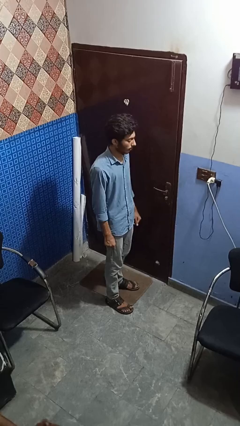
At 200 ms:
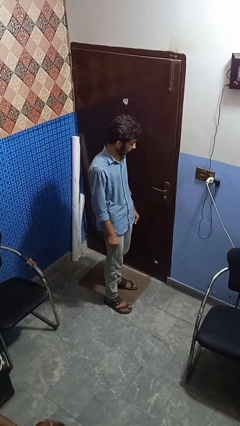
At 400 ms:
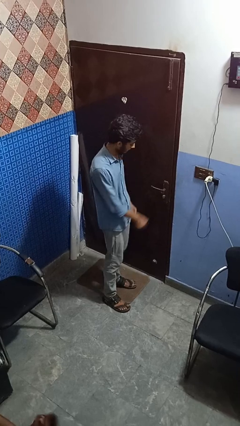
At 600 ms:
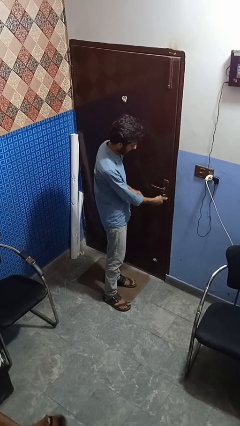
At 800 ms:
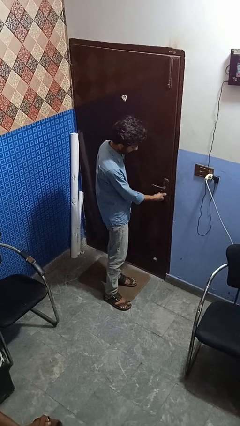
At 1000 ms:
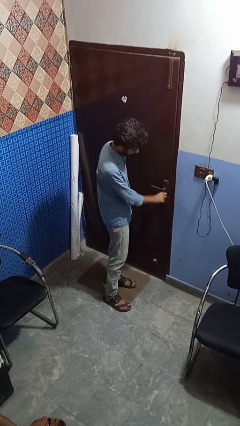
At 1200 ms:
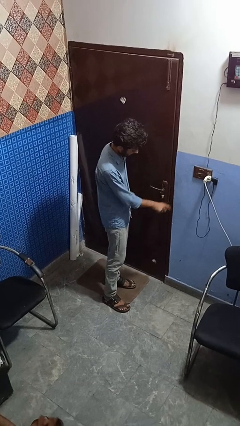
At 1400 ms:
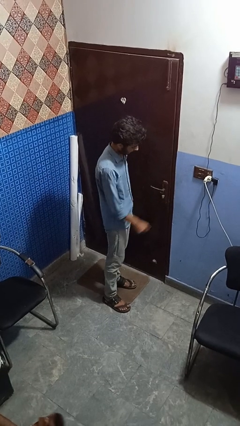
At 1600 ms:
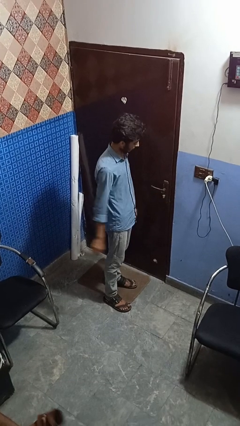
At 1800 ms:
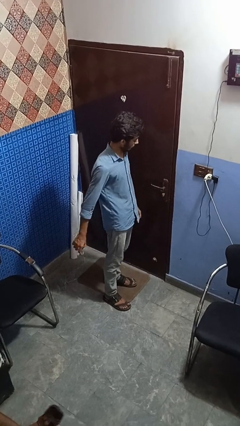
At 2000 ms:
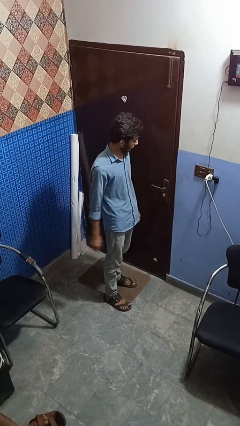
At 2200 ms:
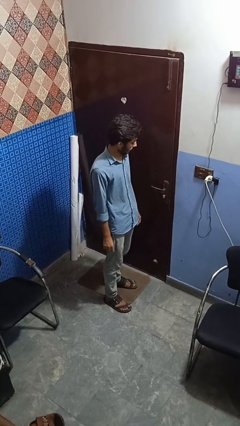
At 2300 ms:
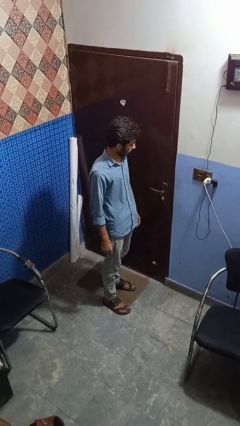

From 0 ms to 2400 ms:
person unlocks door with keys

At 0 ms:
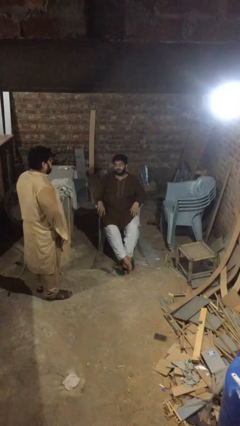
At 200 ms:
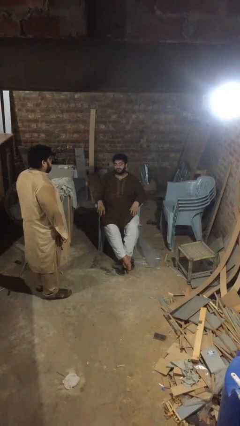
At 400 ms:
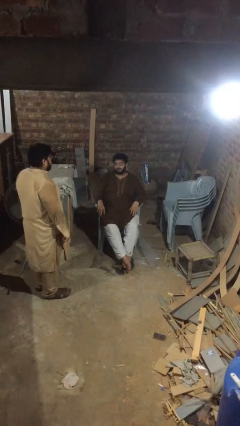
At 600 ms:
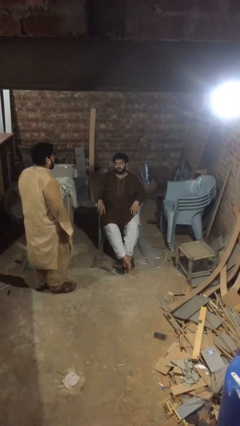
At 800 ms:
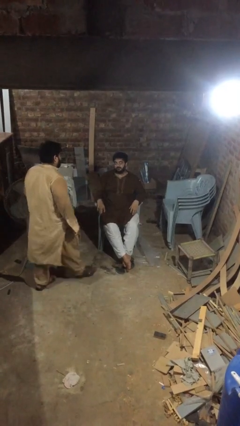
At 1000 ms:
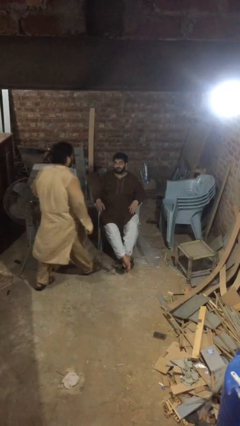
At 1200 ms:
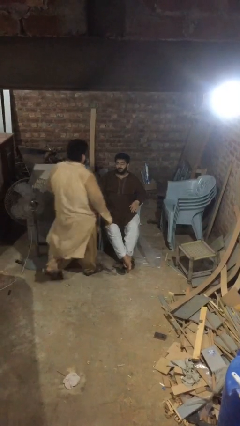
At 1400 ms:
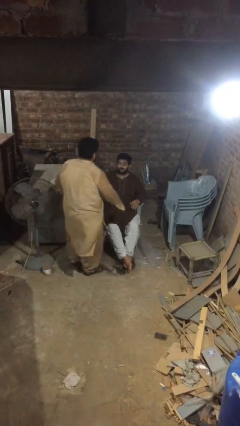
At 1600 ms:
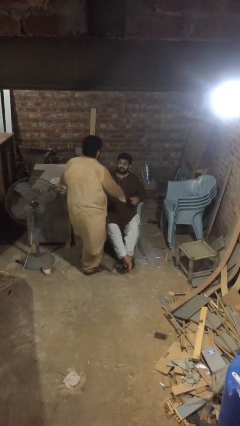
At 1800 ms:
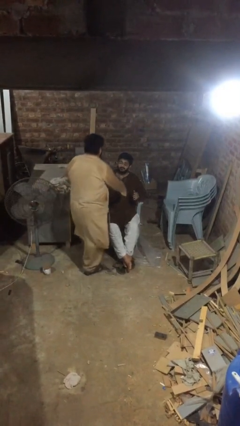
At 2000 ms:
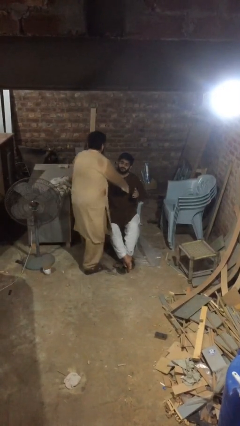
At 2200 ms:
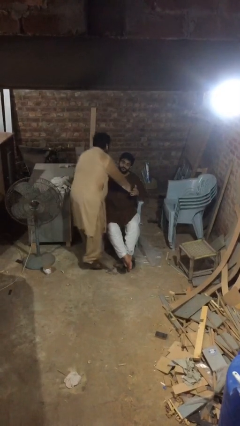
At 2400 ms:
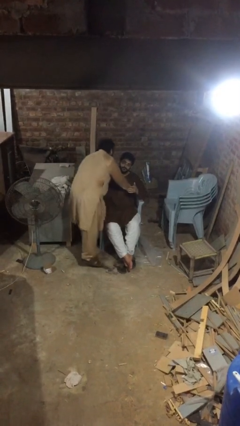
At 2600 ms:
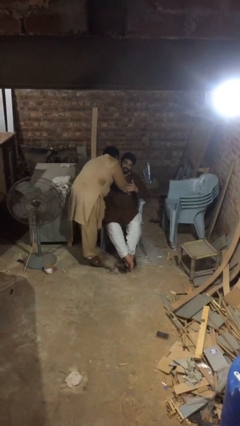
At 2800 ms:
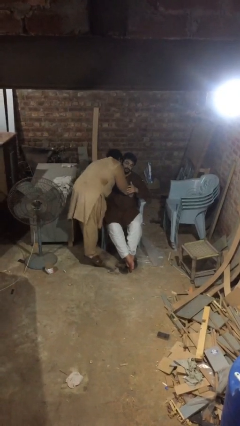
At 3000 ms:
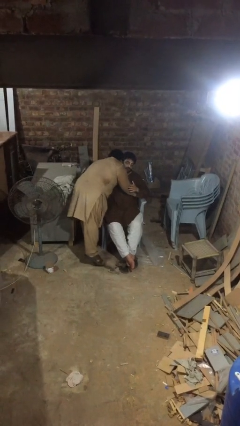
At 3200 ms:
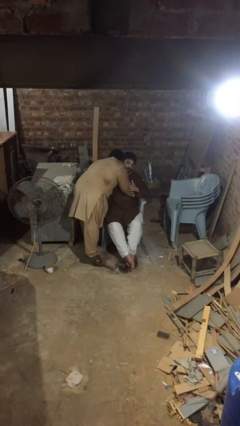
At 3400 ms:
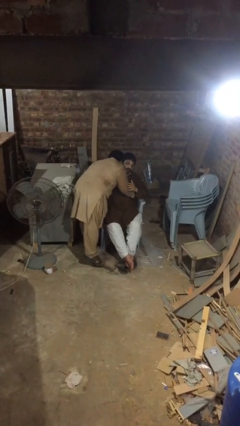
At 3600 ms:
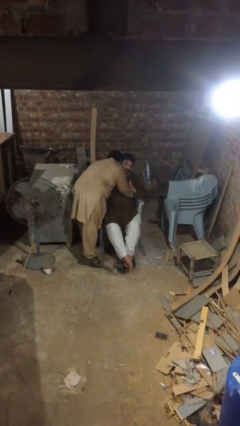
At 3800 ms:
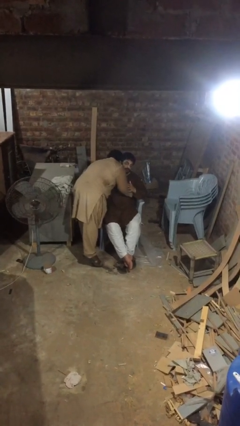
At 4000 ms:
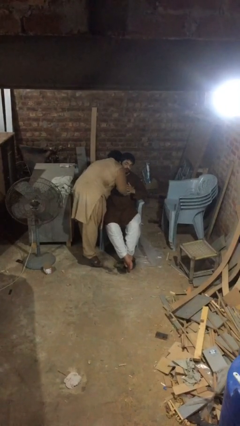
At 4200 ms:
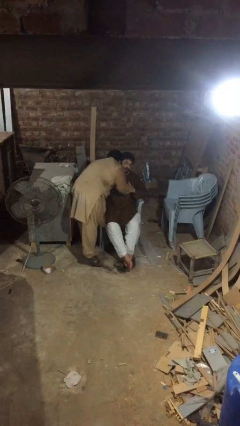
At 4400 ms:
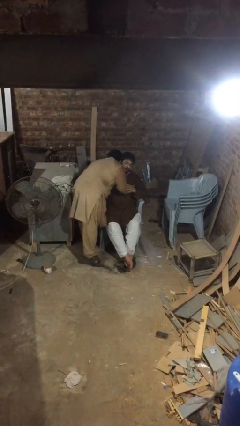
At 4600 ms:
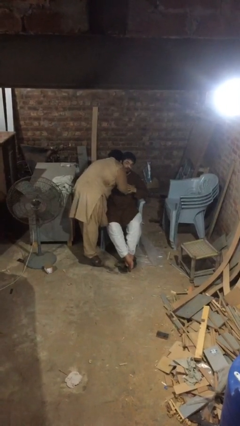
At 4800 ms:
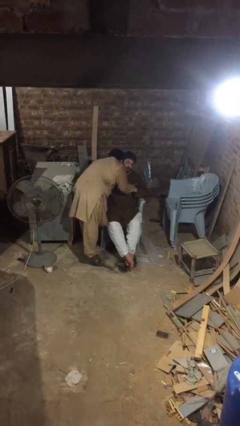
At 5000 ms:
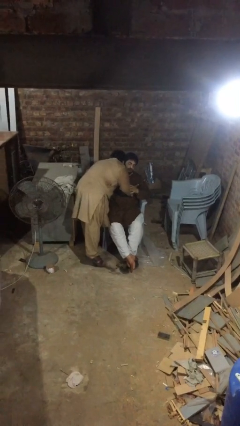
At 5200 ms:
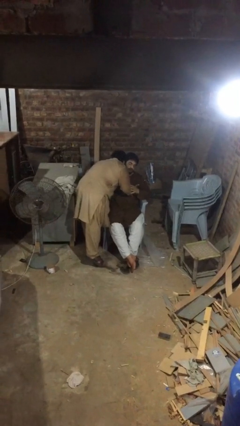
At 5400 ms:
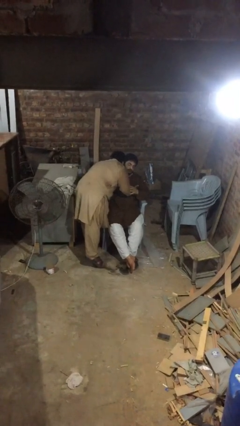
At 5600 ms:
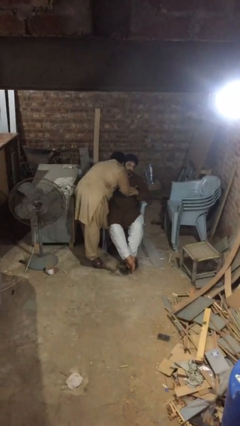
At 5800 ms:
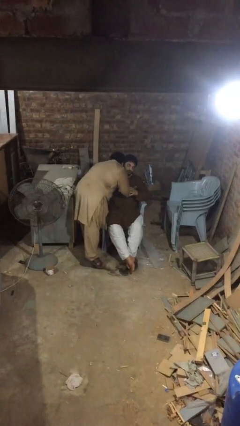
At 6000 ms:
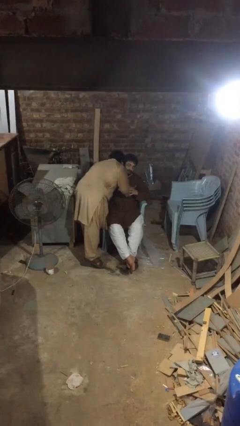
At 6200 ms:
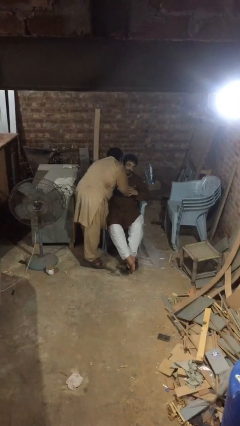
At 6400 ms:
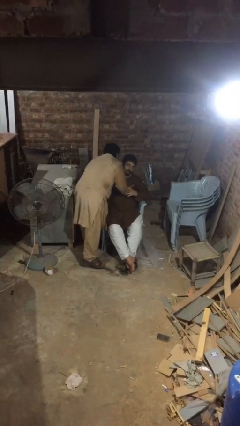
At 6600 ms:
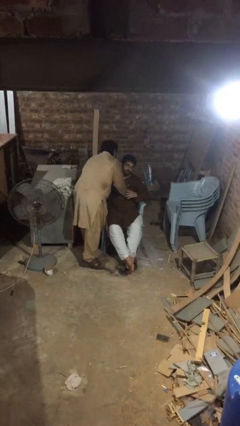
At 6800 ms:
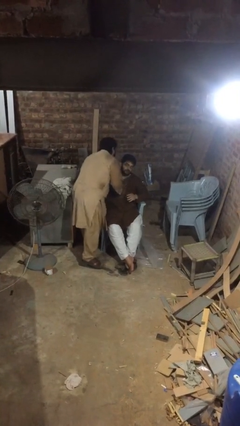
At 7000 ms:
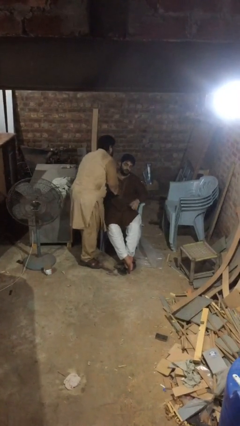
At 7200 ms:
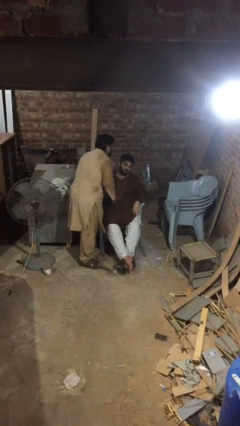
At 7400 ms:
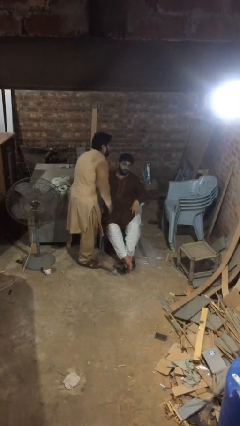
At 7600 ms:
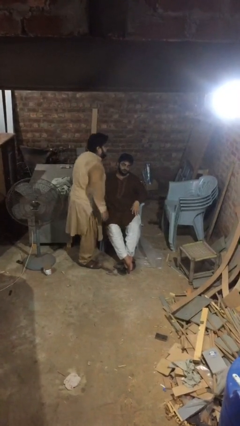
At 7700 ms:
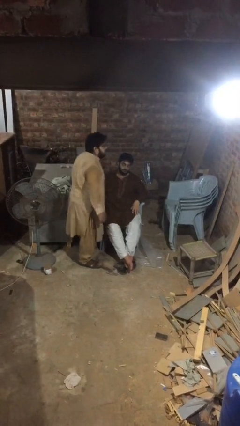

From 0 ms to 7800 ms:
person embraces person

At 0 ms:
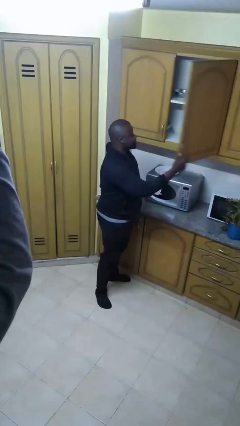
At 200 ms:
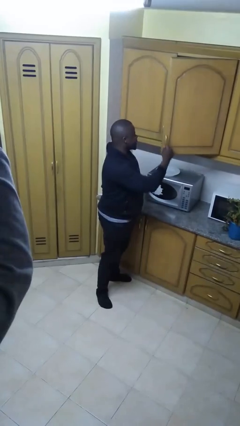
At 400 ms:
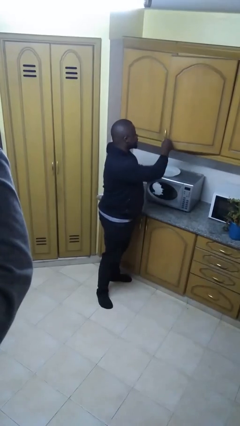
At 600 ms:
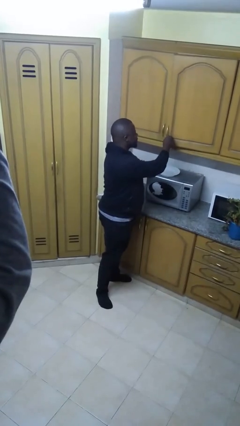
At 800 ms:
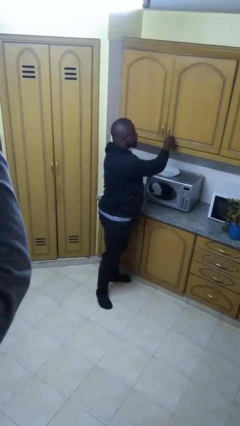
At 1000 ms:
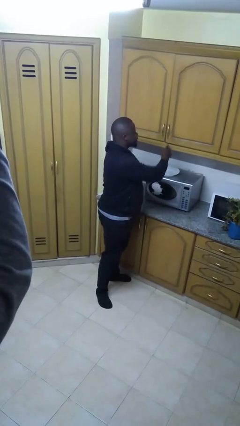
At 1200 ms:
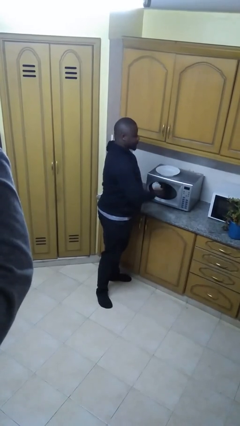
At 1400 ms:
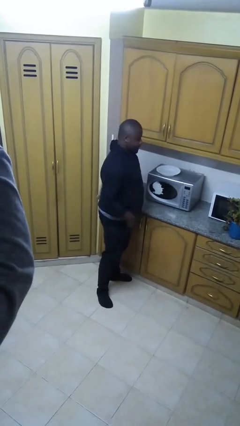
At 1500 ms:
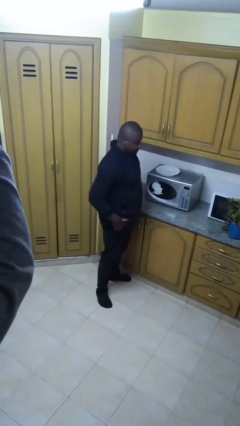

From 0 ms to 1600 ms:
person closes cabinet

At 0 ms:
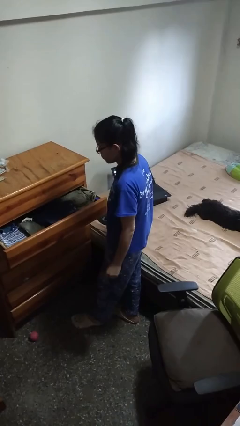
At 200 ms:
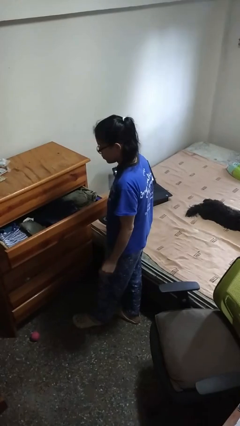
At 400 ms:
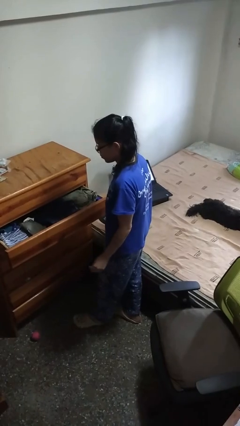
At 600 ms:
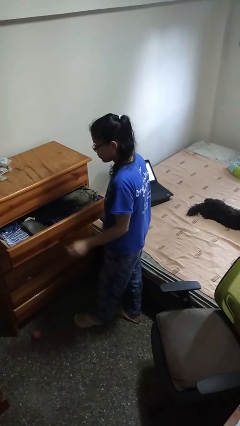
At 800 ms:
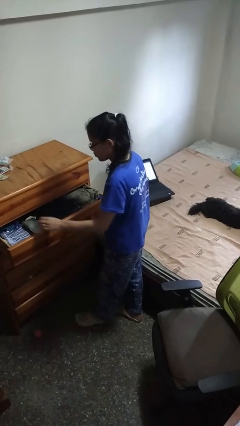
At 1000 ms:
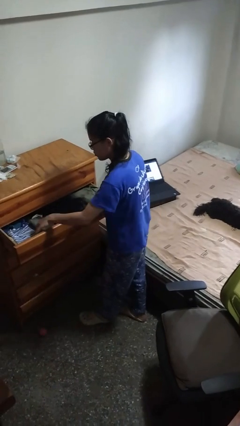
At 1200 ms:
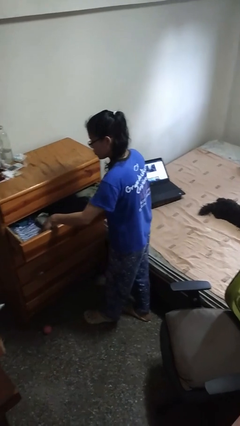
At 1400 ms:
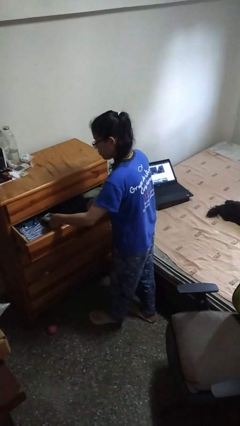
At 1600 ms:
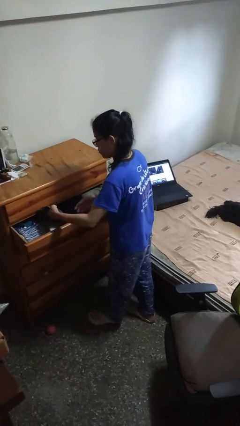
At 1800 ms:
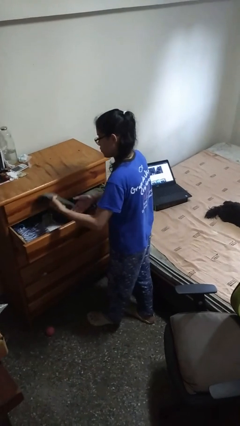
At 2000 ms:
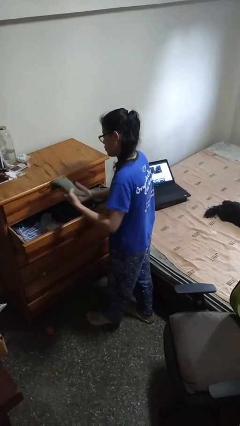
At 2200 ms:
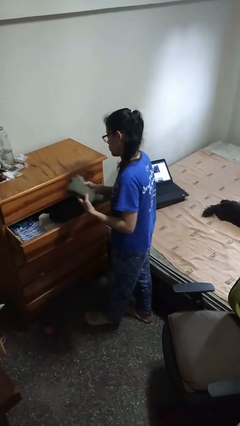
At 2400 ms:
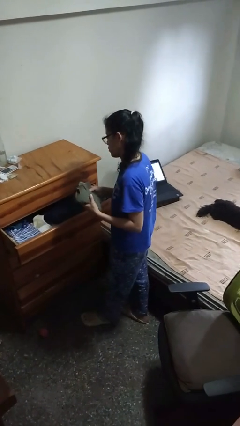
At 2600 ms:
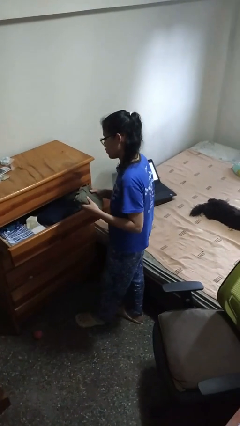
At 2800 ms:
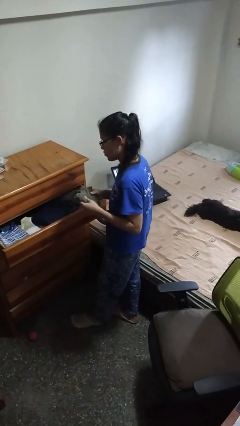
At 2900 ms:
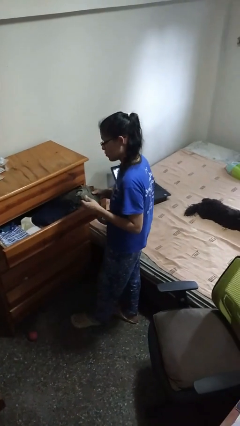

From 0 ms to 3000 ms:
person takes clothes from dresser

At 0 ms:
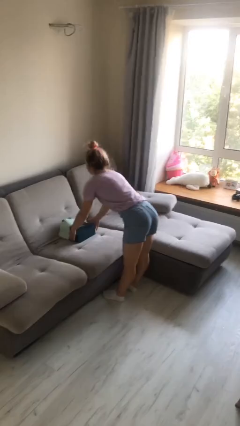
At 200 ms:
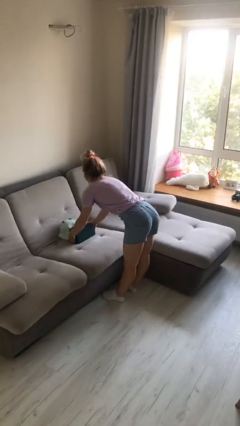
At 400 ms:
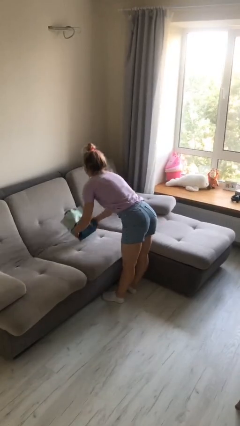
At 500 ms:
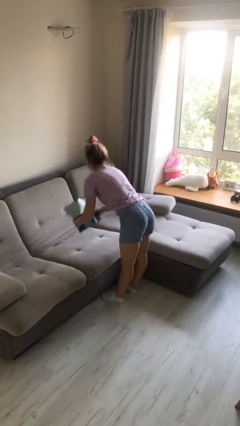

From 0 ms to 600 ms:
person picks up object from couch

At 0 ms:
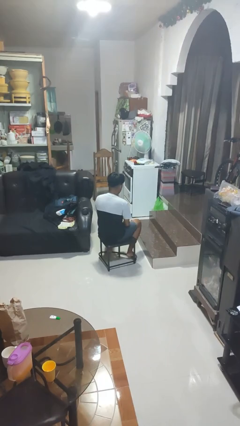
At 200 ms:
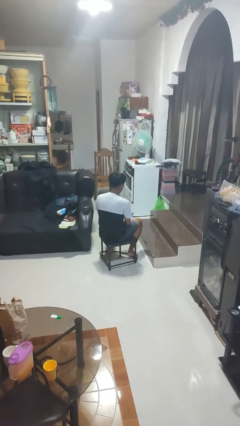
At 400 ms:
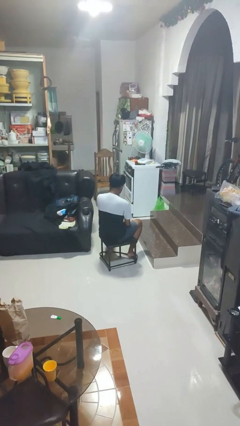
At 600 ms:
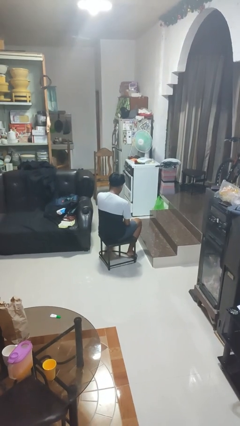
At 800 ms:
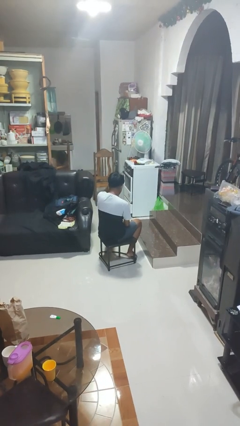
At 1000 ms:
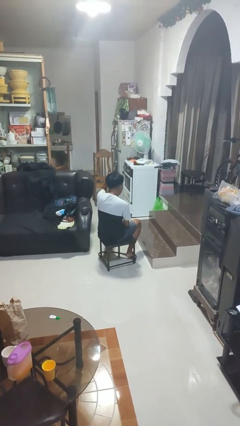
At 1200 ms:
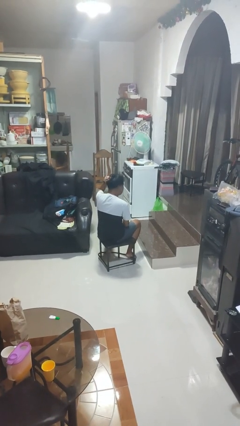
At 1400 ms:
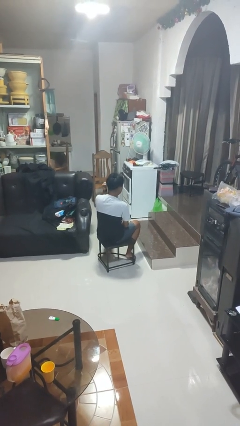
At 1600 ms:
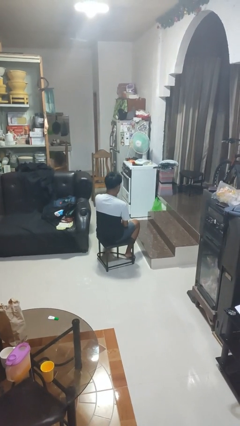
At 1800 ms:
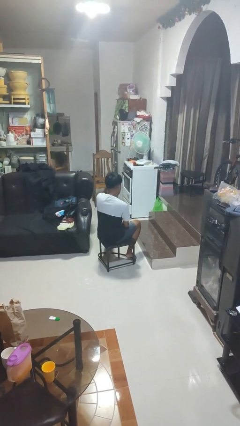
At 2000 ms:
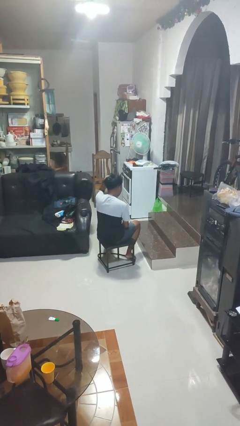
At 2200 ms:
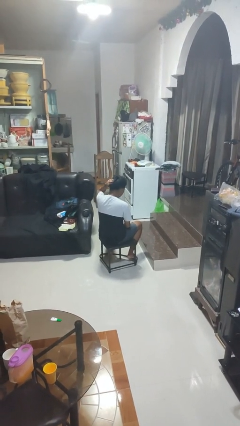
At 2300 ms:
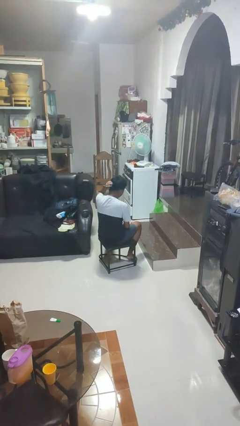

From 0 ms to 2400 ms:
person strokes hair
